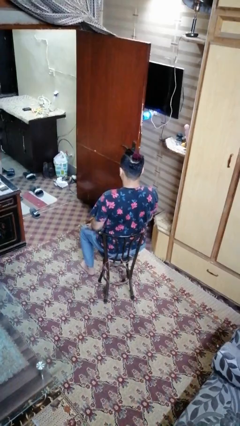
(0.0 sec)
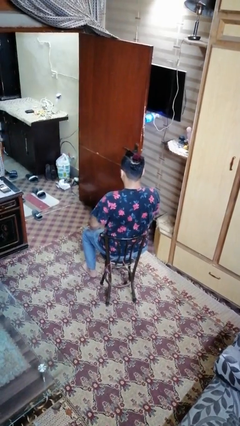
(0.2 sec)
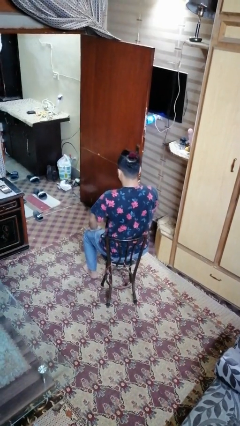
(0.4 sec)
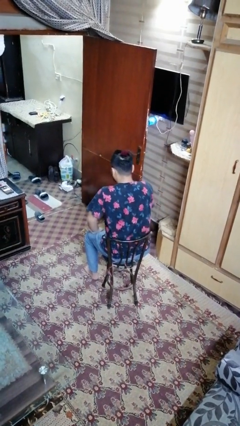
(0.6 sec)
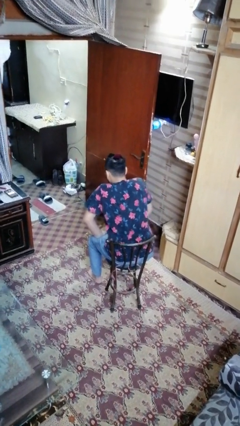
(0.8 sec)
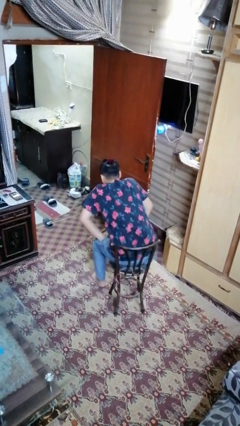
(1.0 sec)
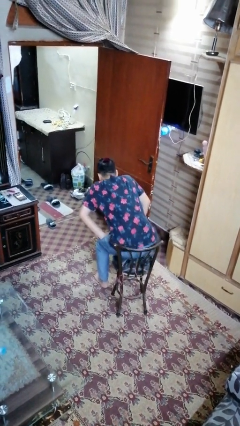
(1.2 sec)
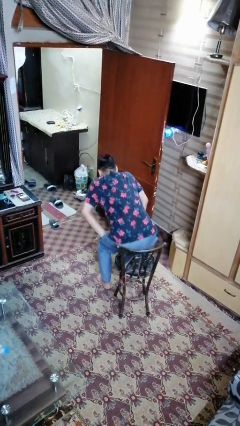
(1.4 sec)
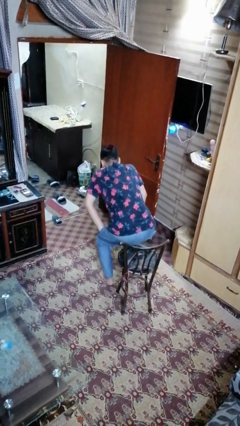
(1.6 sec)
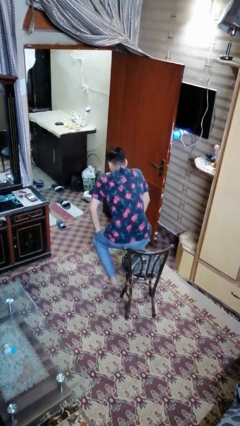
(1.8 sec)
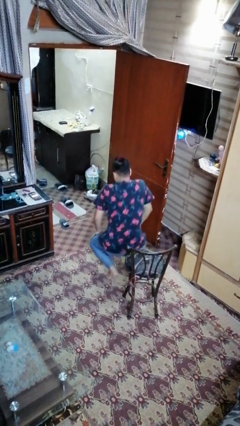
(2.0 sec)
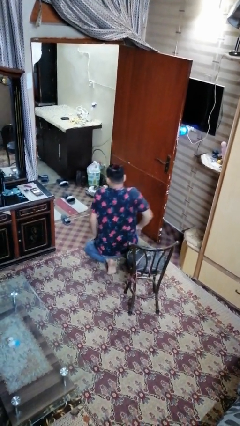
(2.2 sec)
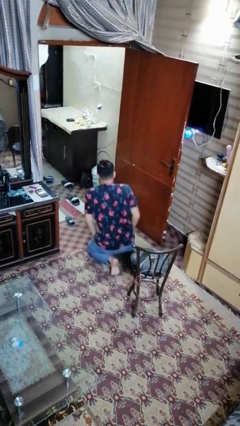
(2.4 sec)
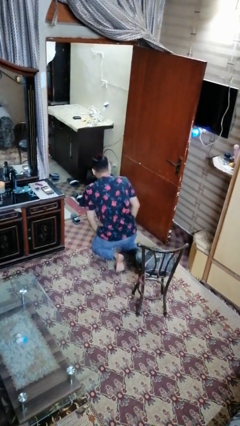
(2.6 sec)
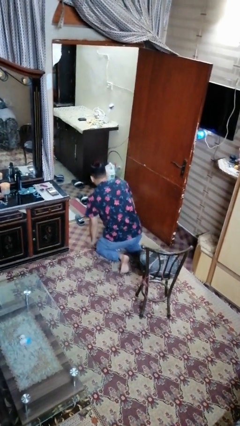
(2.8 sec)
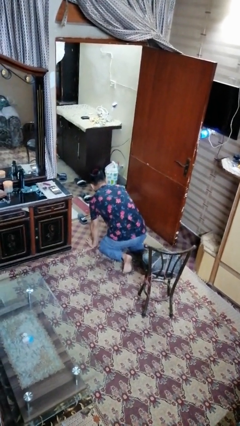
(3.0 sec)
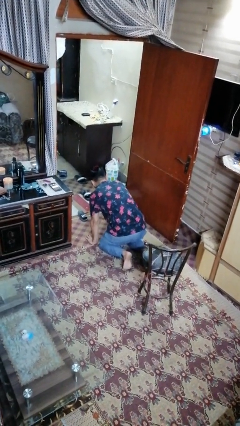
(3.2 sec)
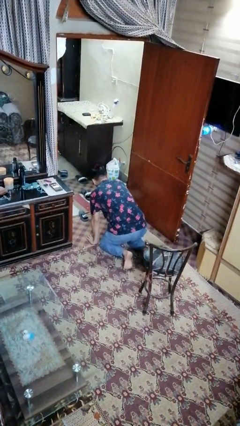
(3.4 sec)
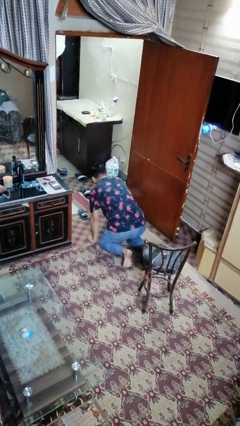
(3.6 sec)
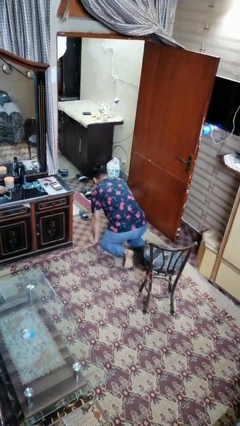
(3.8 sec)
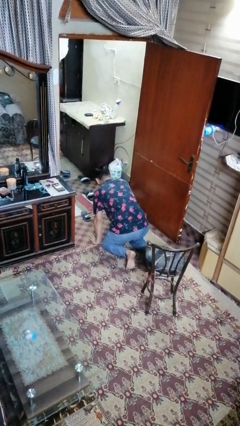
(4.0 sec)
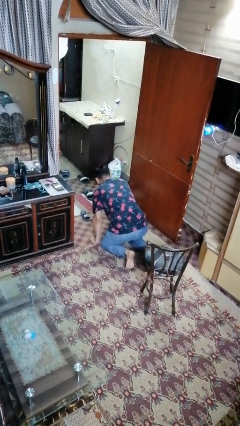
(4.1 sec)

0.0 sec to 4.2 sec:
person falls from chair

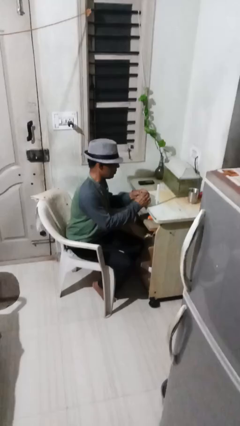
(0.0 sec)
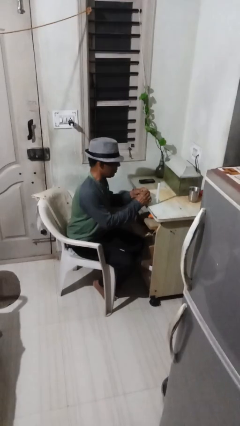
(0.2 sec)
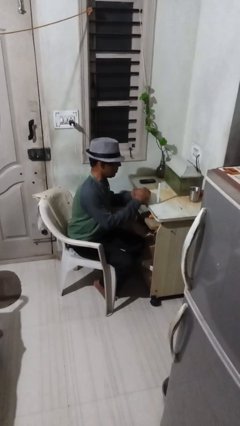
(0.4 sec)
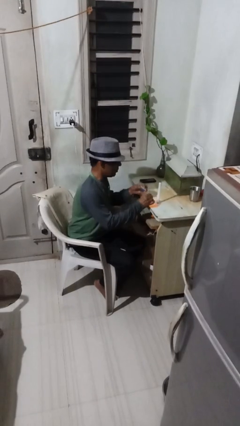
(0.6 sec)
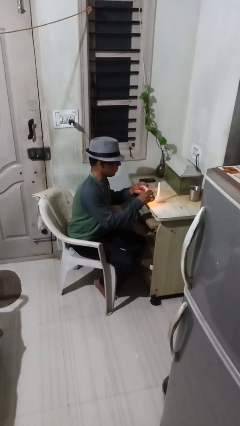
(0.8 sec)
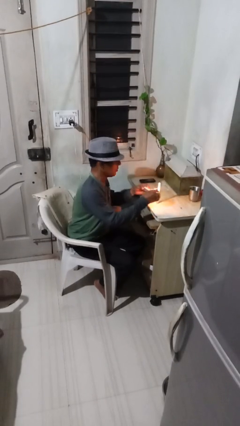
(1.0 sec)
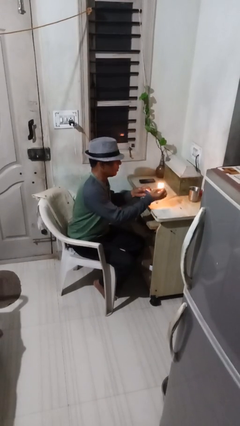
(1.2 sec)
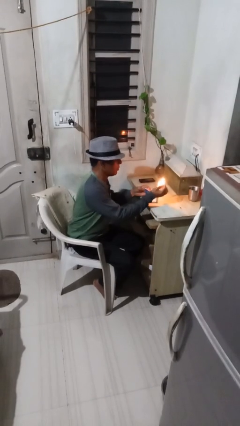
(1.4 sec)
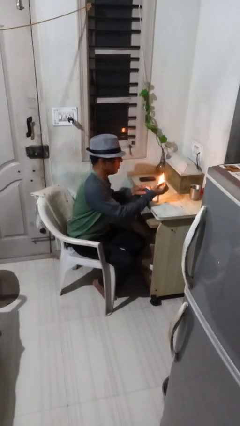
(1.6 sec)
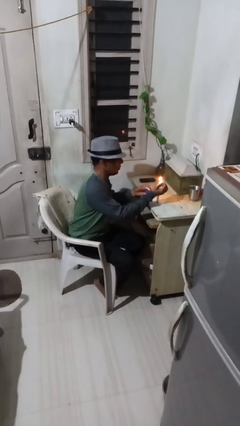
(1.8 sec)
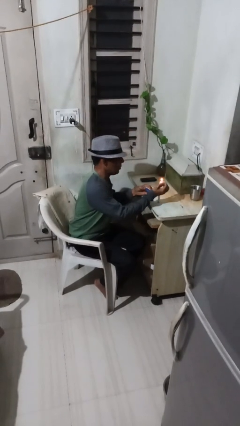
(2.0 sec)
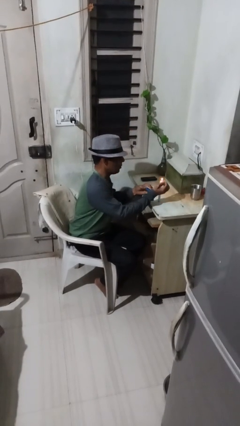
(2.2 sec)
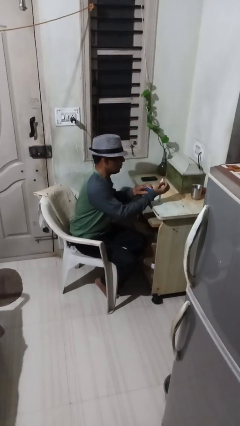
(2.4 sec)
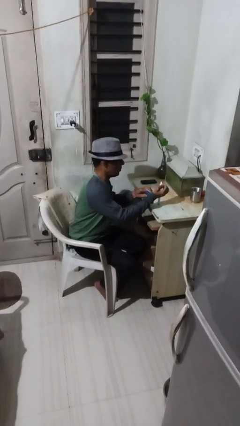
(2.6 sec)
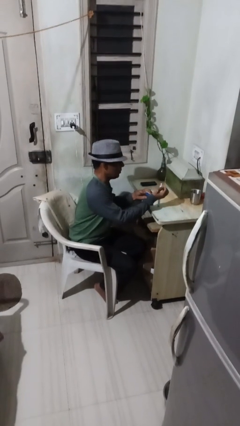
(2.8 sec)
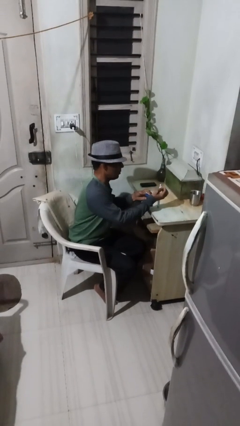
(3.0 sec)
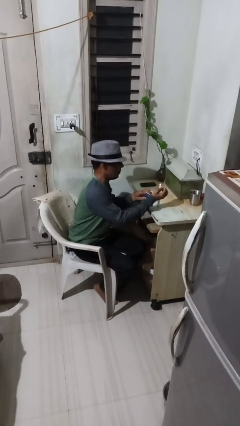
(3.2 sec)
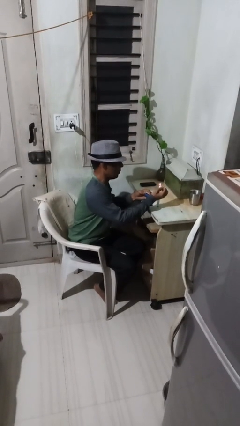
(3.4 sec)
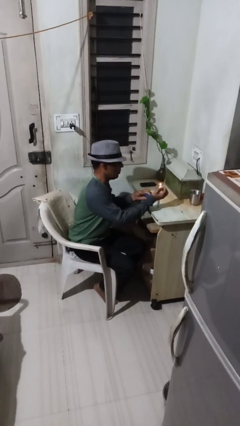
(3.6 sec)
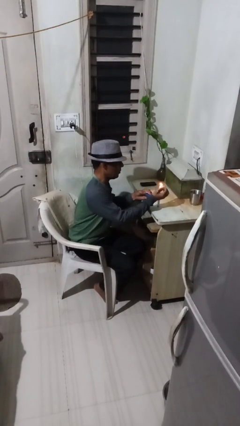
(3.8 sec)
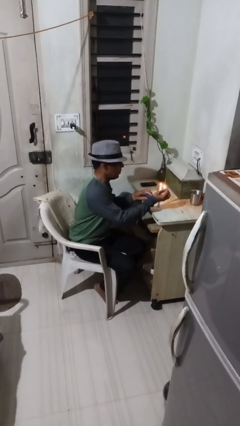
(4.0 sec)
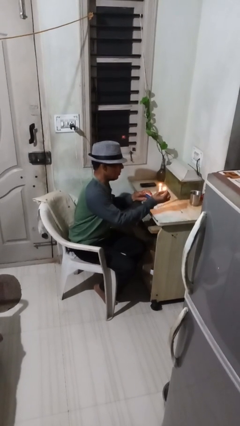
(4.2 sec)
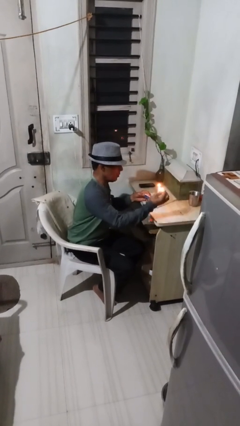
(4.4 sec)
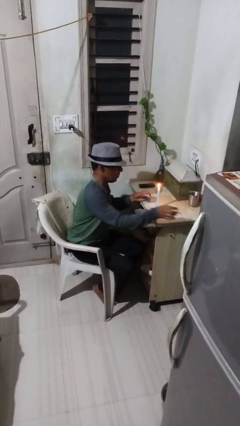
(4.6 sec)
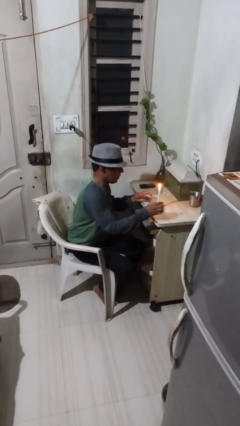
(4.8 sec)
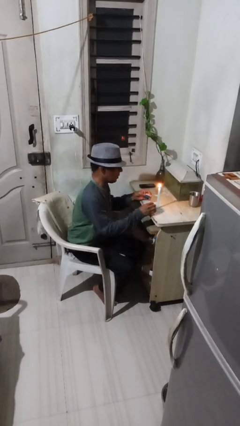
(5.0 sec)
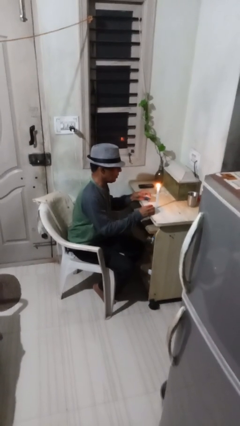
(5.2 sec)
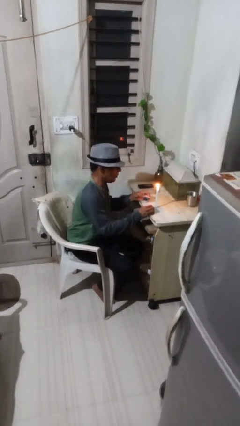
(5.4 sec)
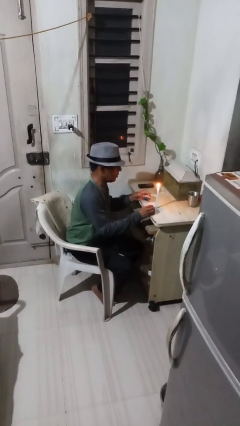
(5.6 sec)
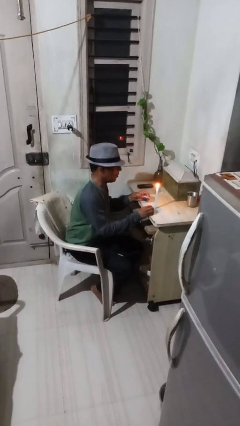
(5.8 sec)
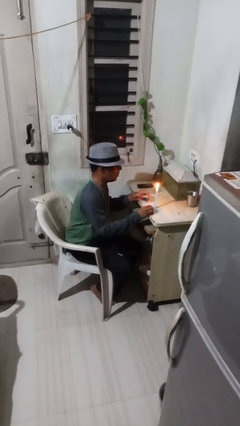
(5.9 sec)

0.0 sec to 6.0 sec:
person lights candle

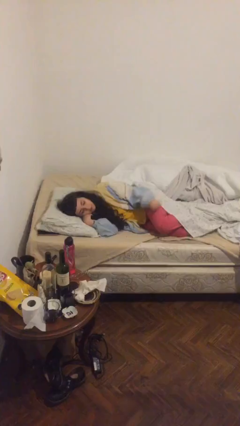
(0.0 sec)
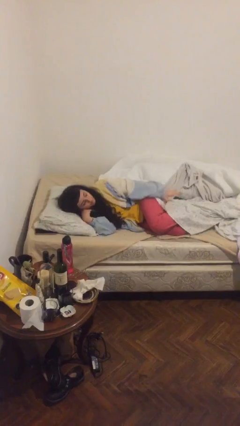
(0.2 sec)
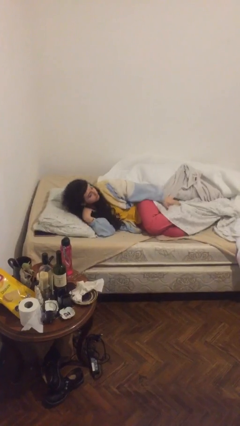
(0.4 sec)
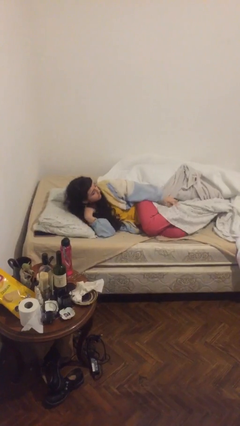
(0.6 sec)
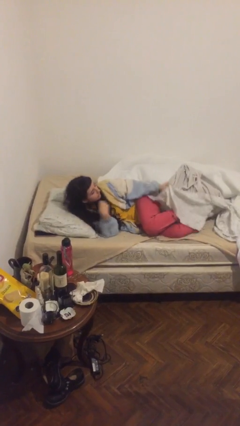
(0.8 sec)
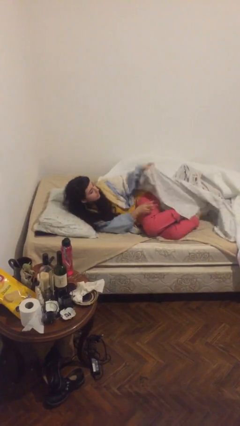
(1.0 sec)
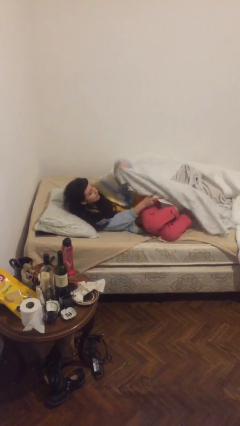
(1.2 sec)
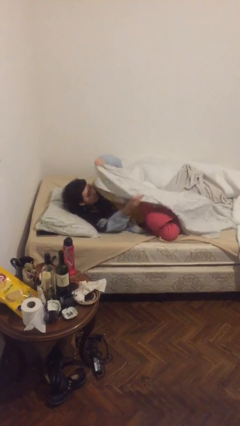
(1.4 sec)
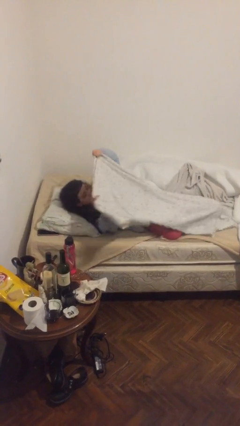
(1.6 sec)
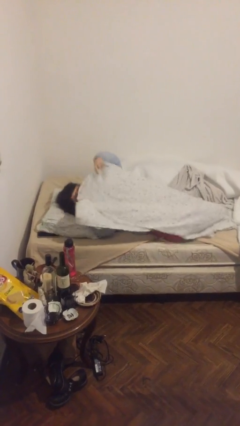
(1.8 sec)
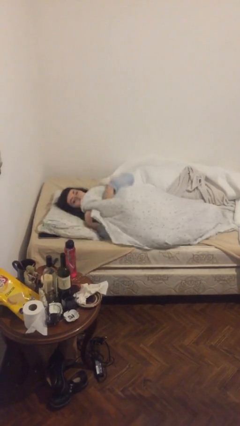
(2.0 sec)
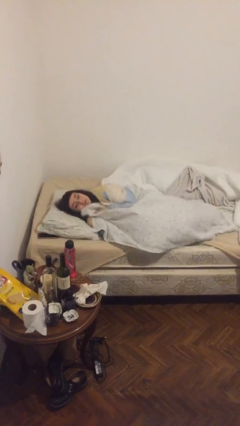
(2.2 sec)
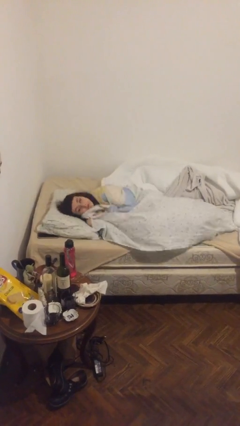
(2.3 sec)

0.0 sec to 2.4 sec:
person covers with bedsheets

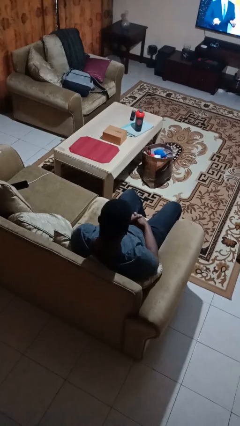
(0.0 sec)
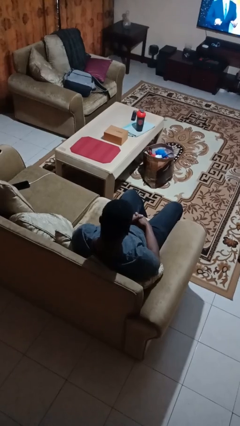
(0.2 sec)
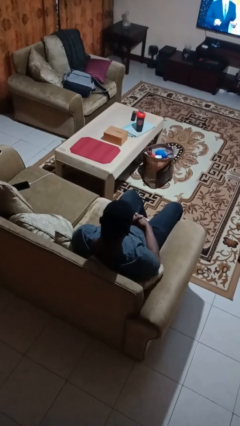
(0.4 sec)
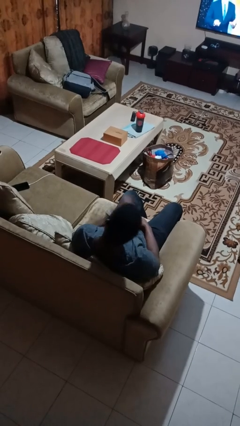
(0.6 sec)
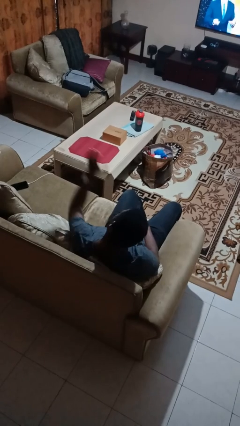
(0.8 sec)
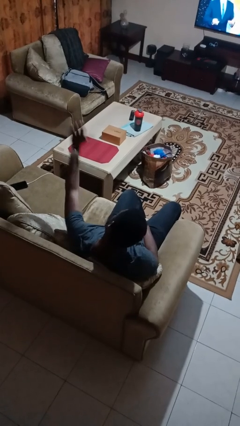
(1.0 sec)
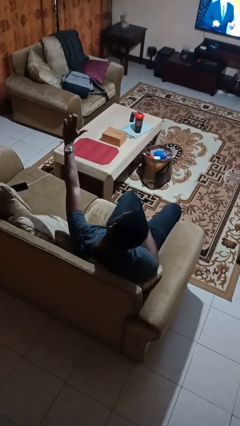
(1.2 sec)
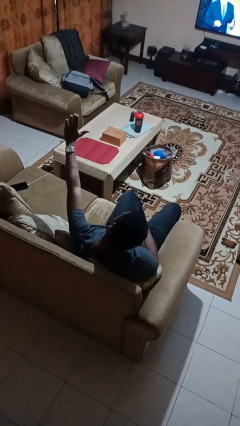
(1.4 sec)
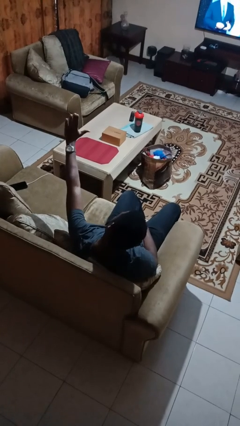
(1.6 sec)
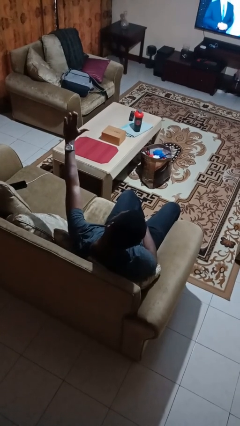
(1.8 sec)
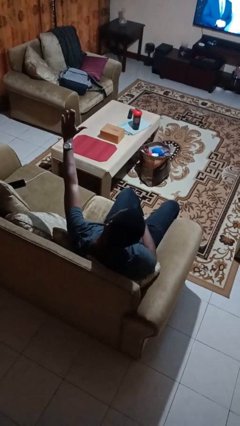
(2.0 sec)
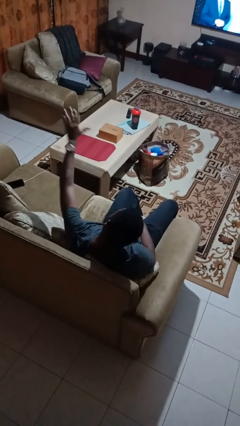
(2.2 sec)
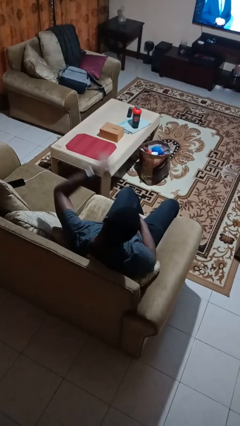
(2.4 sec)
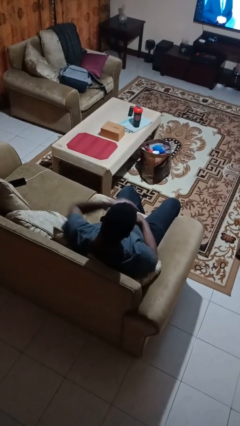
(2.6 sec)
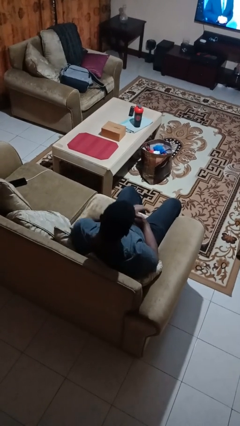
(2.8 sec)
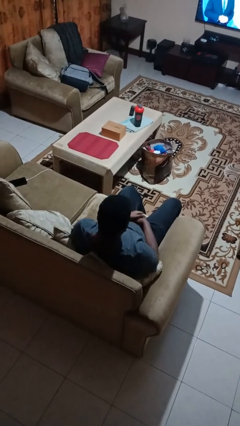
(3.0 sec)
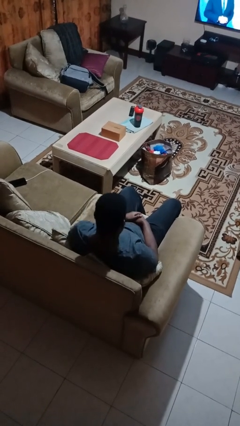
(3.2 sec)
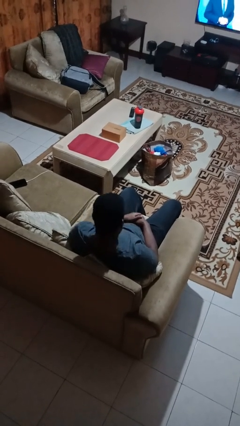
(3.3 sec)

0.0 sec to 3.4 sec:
person gestures stop

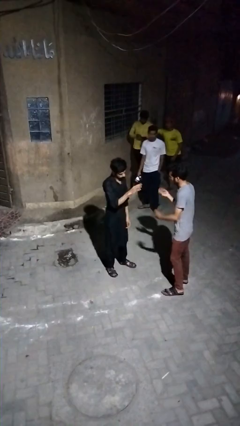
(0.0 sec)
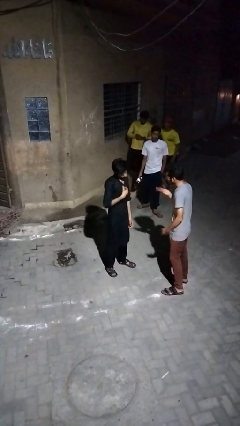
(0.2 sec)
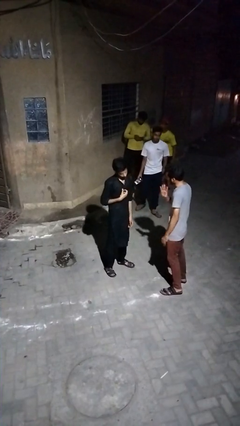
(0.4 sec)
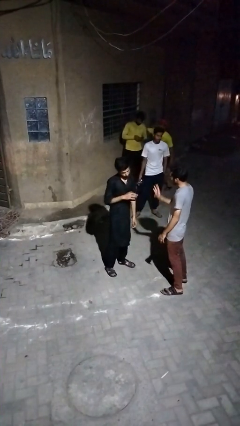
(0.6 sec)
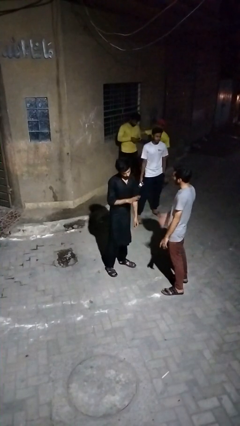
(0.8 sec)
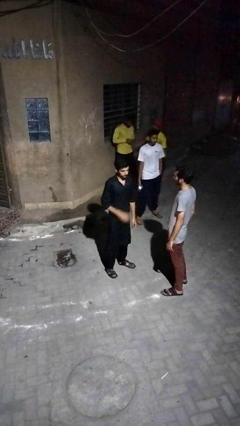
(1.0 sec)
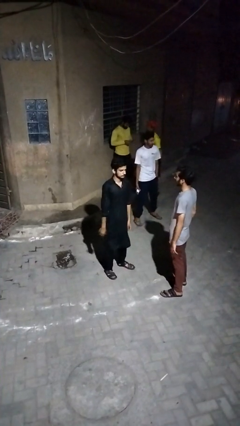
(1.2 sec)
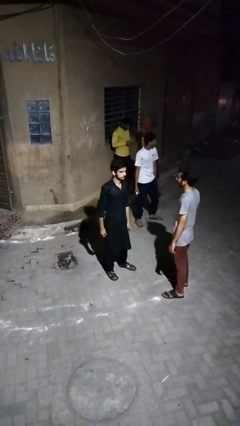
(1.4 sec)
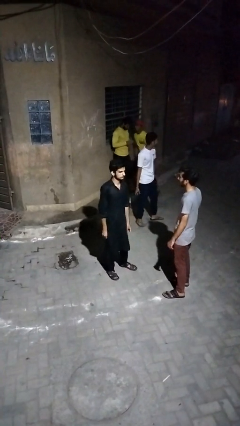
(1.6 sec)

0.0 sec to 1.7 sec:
person talks to person
